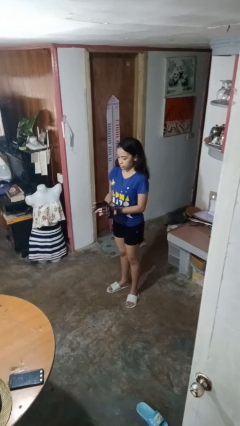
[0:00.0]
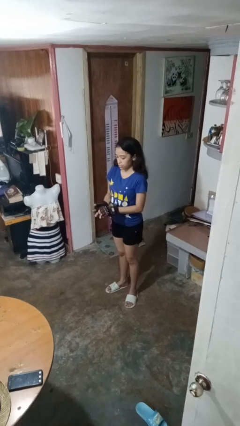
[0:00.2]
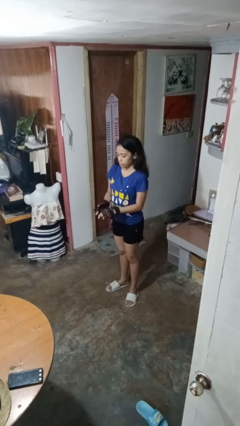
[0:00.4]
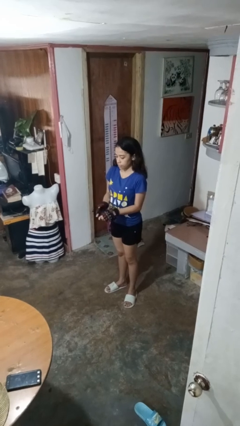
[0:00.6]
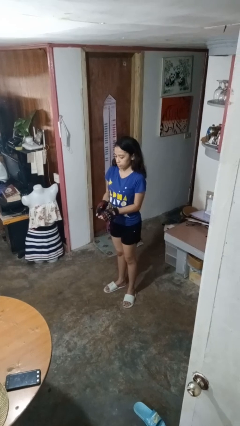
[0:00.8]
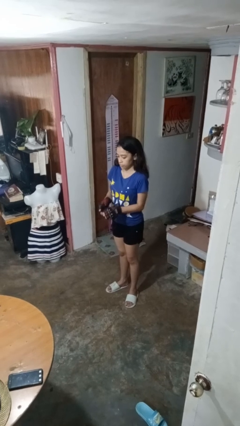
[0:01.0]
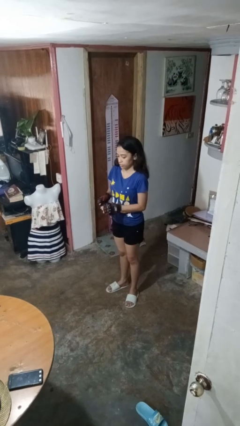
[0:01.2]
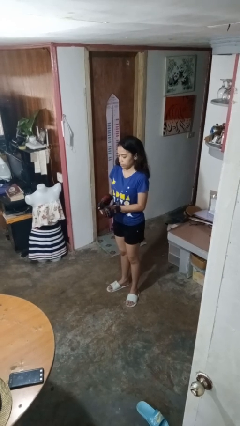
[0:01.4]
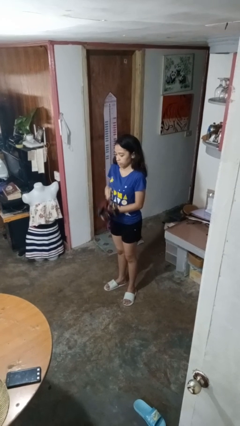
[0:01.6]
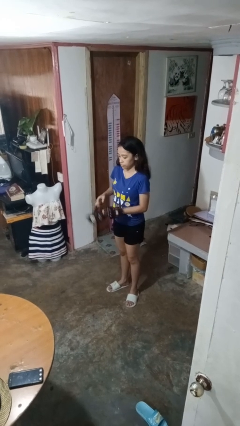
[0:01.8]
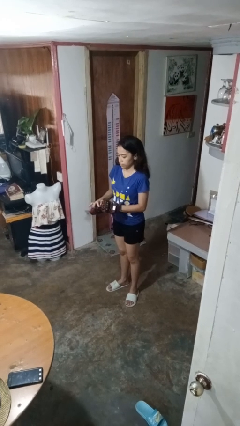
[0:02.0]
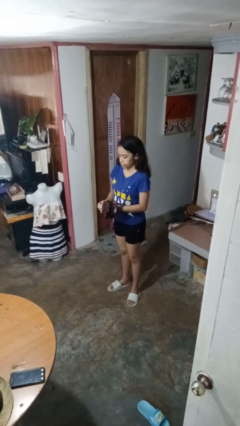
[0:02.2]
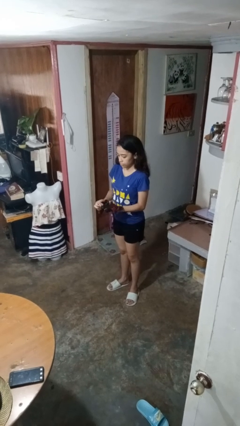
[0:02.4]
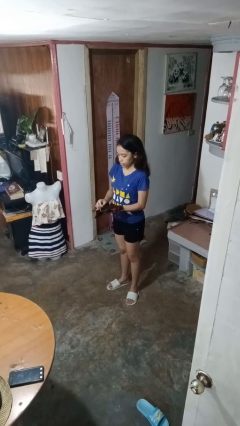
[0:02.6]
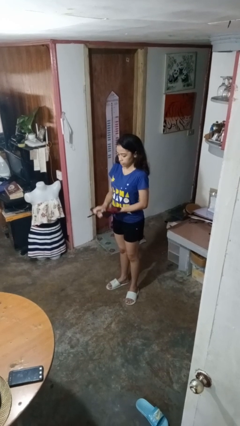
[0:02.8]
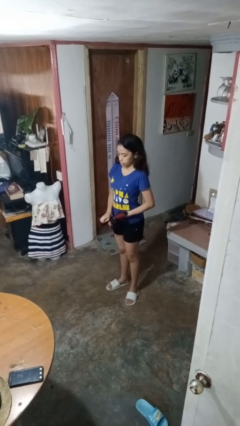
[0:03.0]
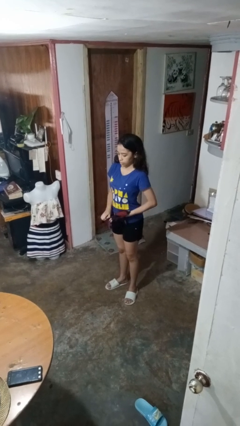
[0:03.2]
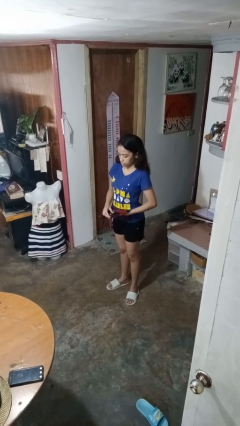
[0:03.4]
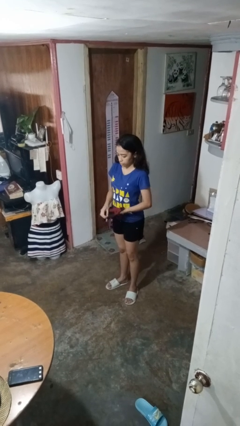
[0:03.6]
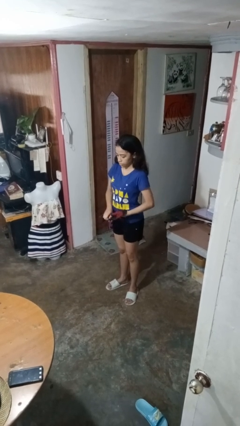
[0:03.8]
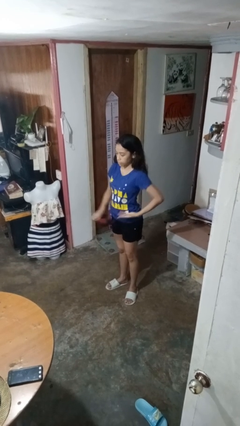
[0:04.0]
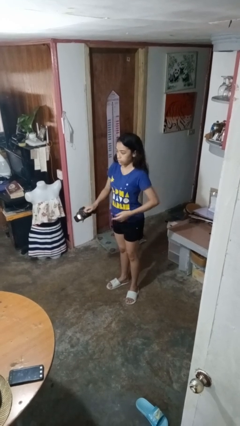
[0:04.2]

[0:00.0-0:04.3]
person takes off gloves

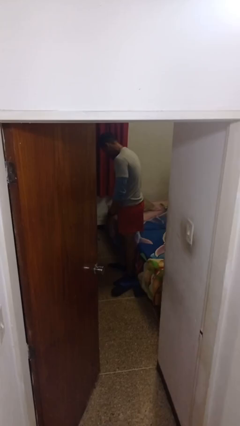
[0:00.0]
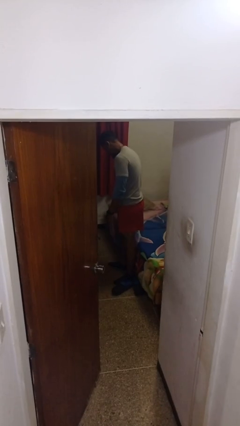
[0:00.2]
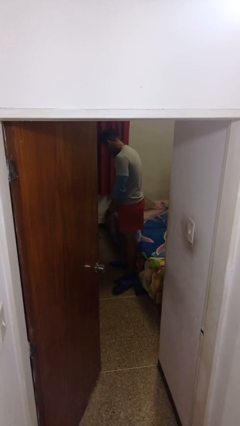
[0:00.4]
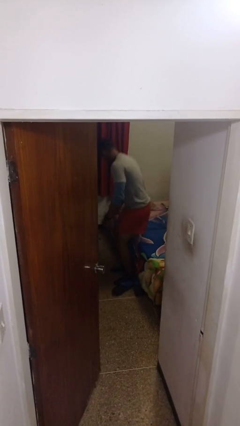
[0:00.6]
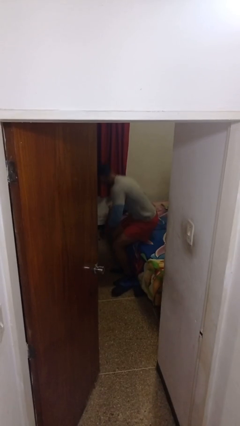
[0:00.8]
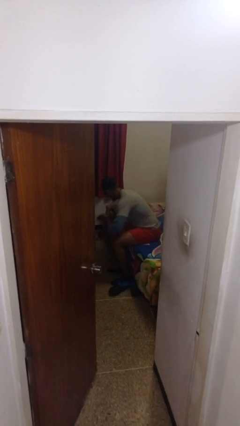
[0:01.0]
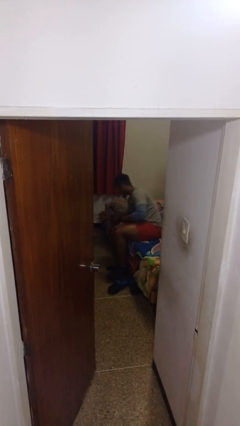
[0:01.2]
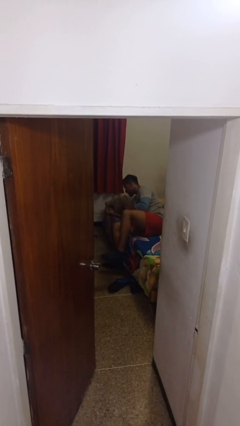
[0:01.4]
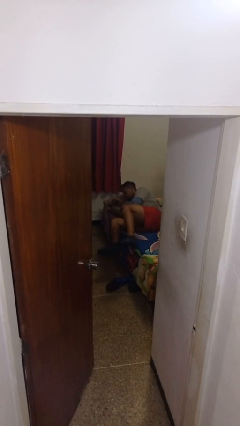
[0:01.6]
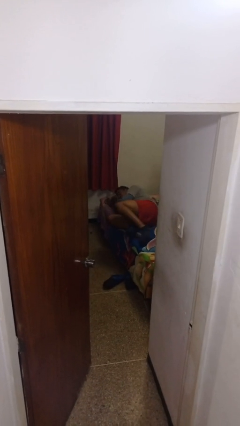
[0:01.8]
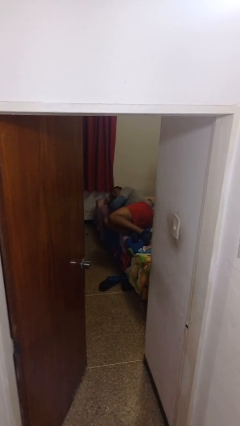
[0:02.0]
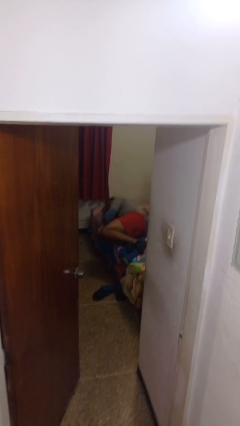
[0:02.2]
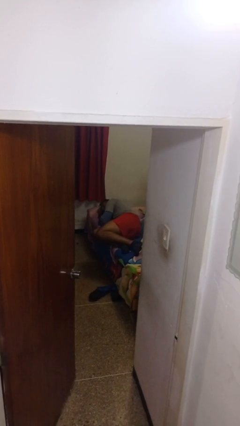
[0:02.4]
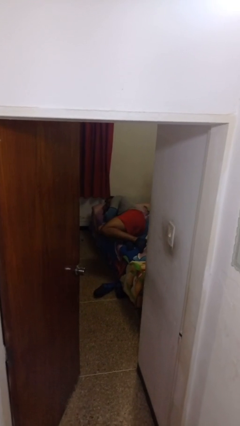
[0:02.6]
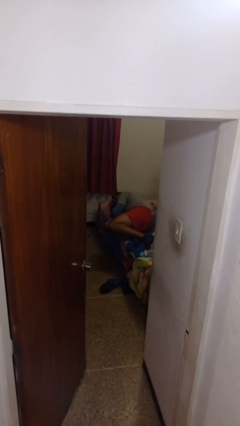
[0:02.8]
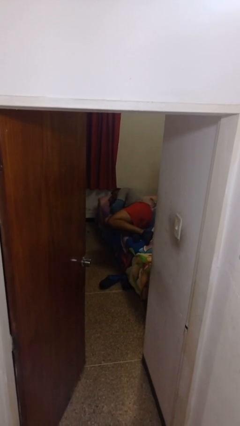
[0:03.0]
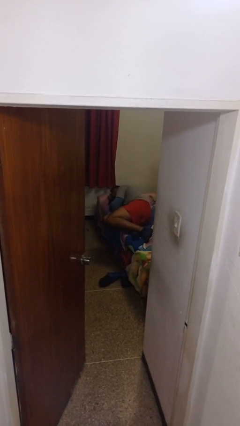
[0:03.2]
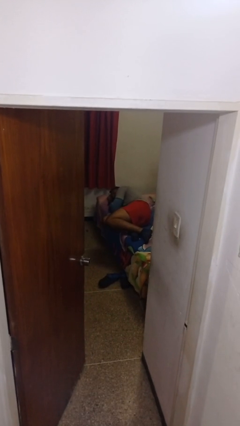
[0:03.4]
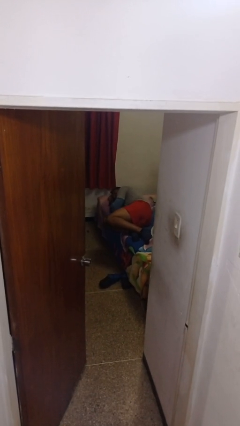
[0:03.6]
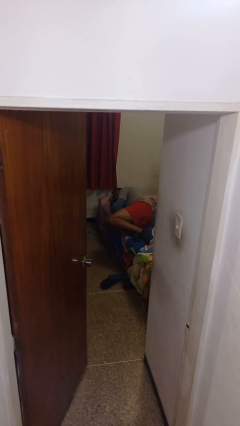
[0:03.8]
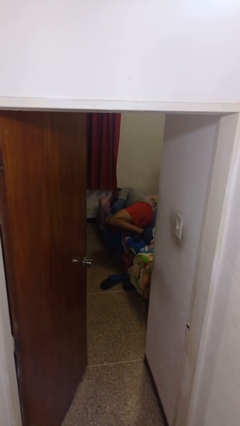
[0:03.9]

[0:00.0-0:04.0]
person lies down on bed

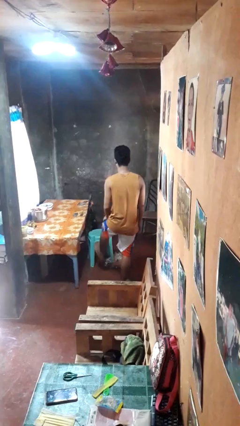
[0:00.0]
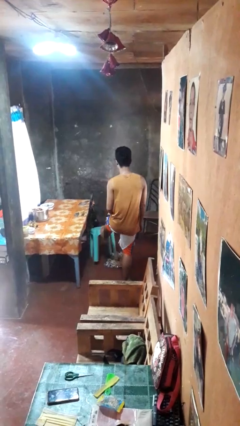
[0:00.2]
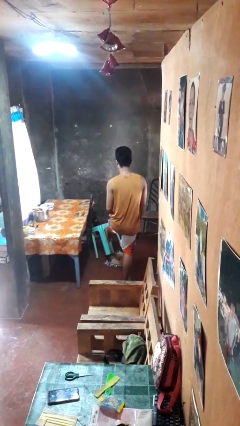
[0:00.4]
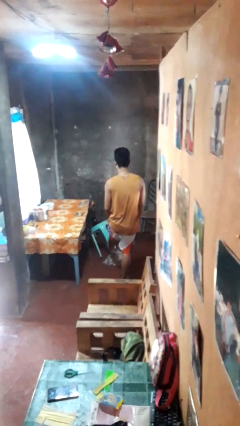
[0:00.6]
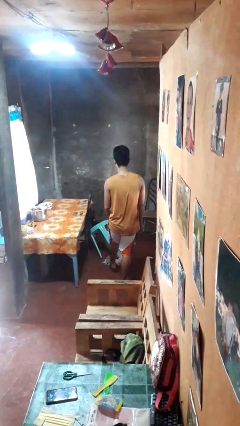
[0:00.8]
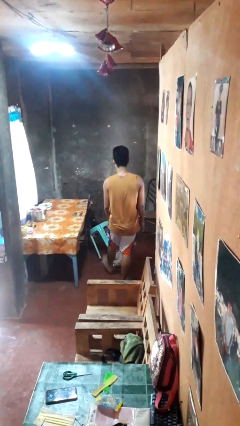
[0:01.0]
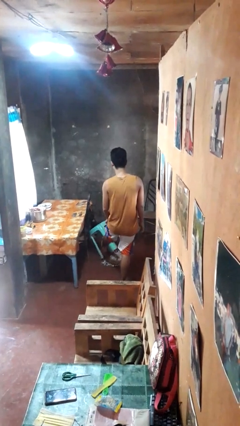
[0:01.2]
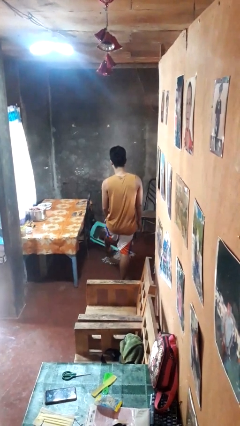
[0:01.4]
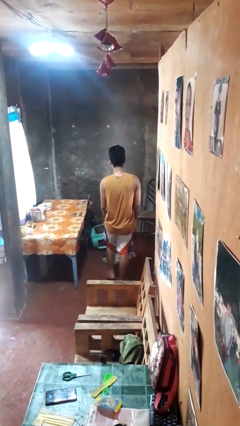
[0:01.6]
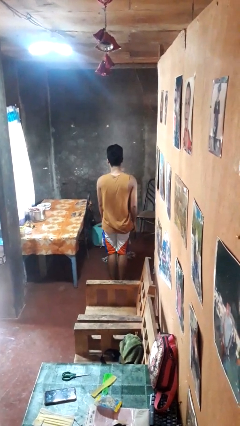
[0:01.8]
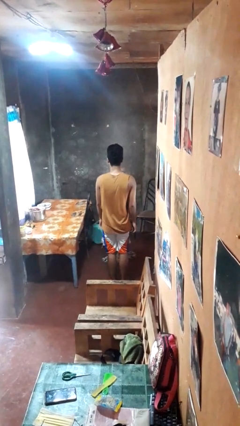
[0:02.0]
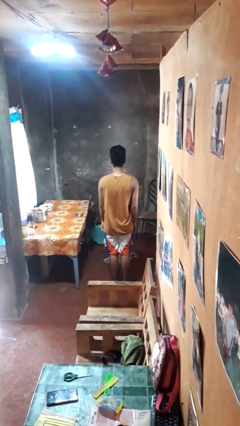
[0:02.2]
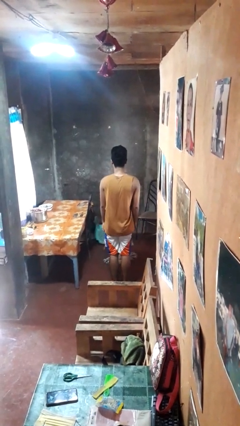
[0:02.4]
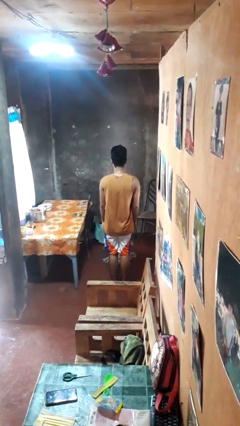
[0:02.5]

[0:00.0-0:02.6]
person knocks over furniture

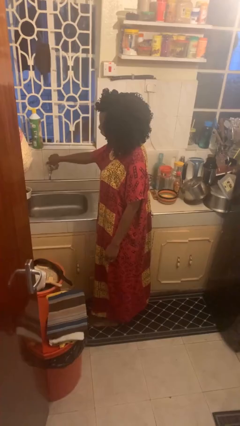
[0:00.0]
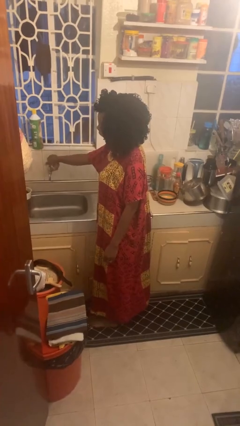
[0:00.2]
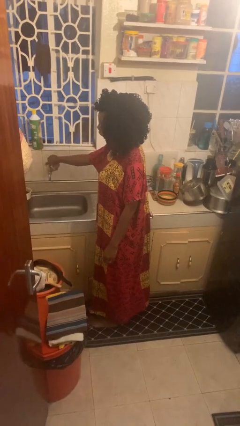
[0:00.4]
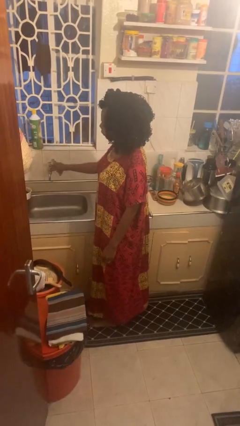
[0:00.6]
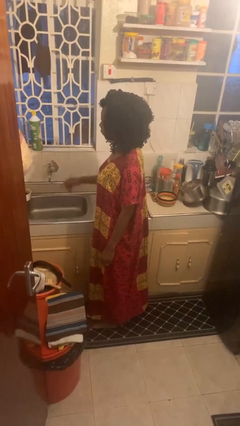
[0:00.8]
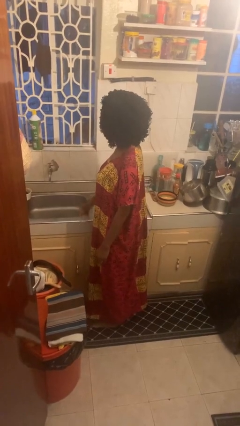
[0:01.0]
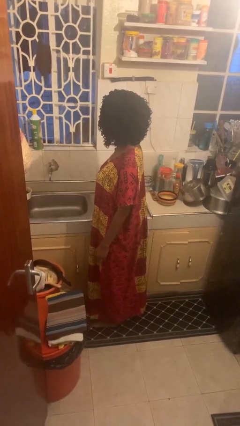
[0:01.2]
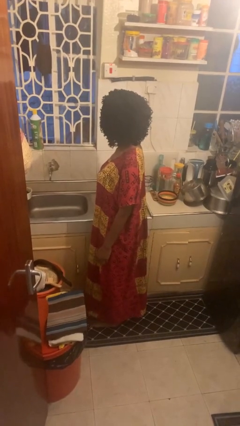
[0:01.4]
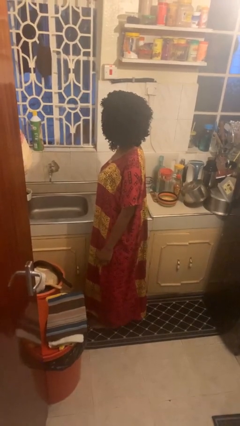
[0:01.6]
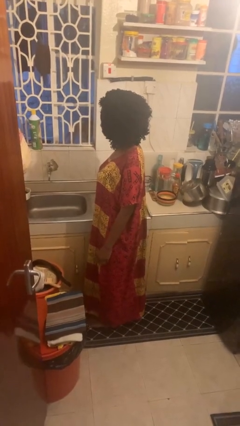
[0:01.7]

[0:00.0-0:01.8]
person turns off faucet

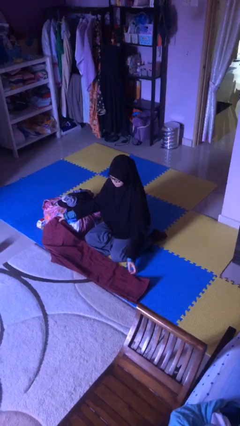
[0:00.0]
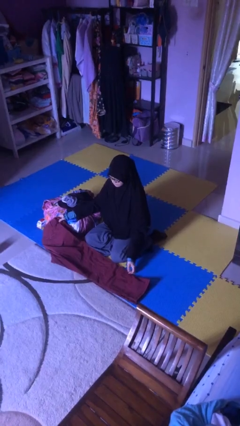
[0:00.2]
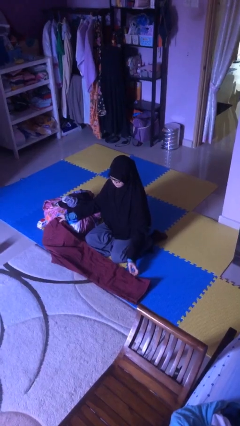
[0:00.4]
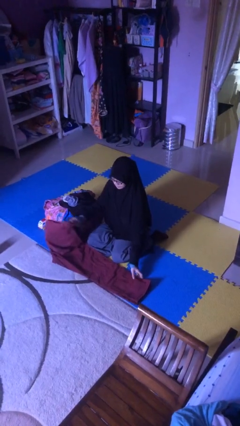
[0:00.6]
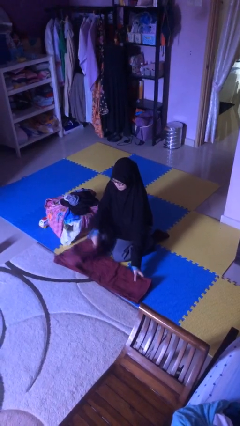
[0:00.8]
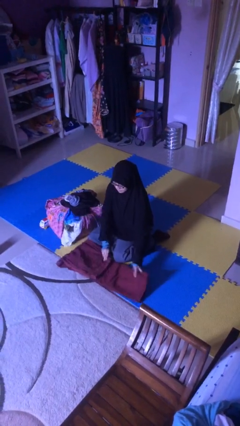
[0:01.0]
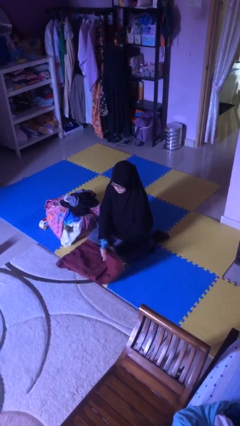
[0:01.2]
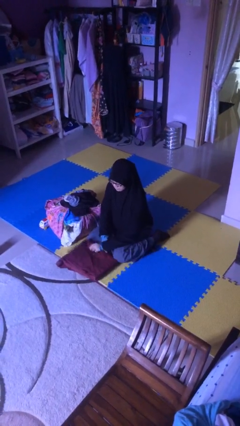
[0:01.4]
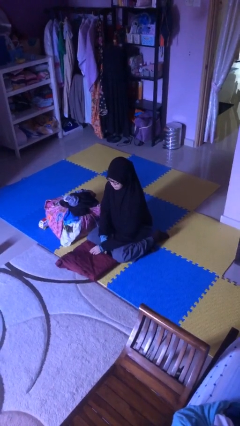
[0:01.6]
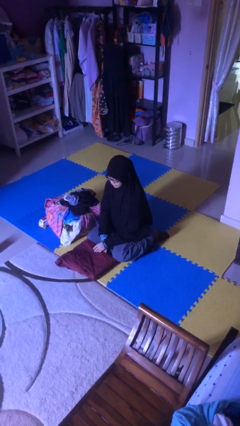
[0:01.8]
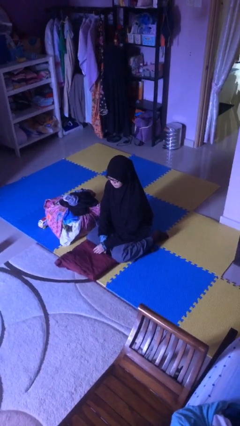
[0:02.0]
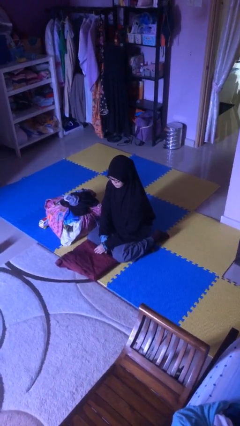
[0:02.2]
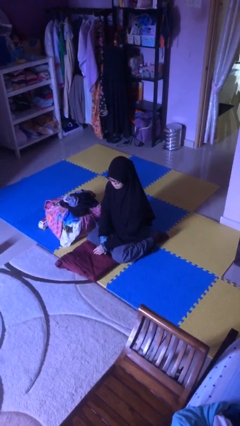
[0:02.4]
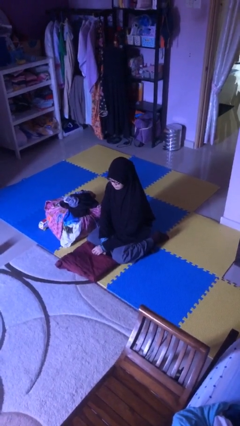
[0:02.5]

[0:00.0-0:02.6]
person folds pants

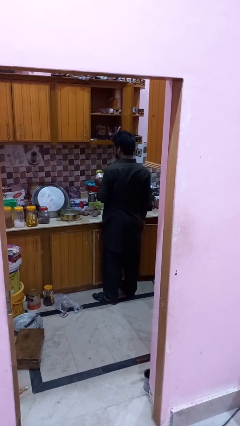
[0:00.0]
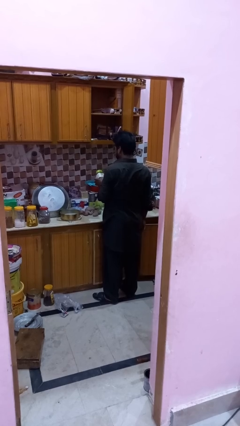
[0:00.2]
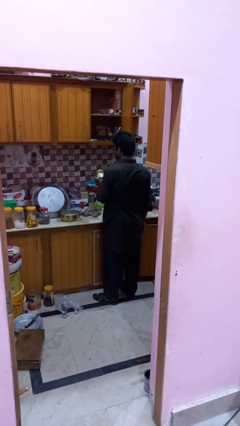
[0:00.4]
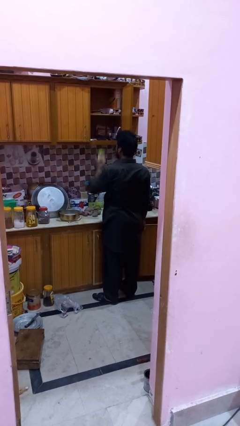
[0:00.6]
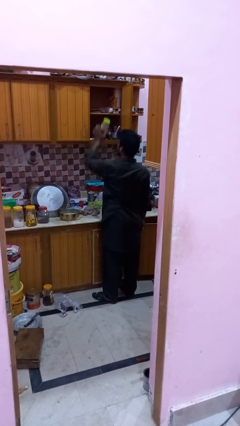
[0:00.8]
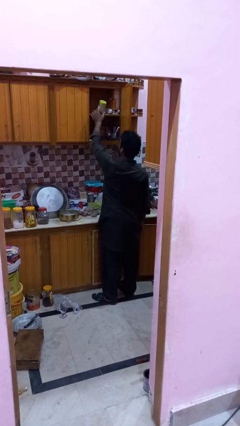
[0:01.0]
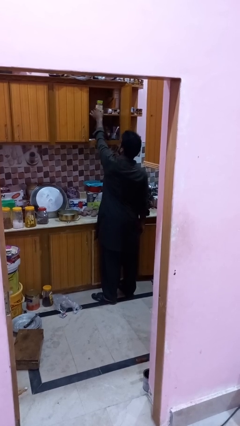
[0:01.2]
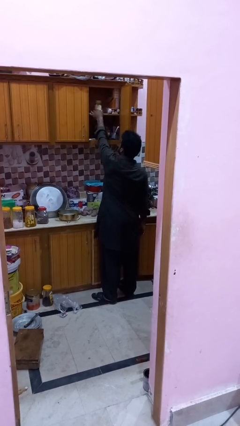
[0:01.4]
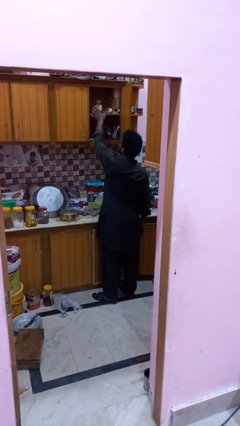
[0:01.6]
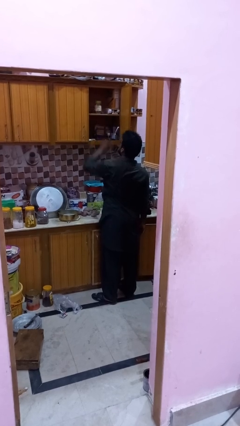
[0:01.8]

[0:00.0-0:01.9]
person puts object in cabinet

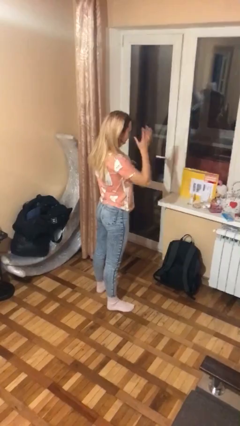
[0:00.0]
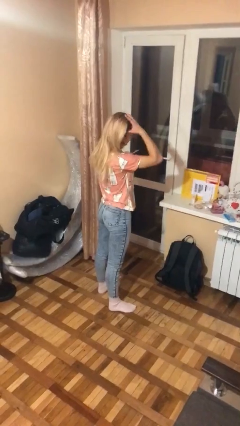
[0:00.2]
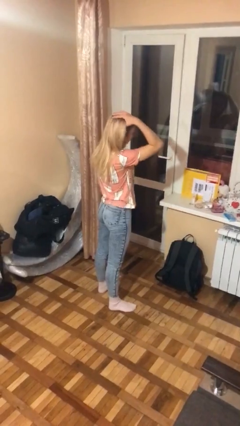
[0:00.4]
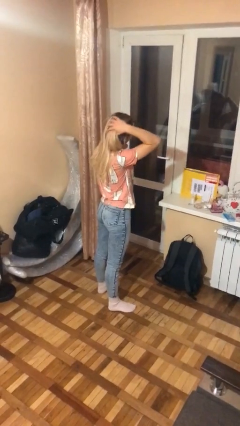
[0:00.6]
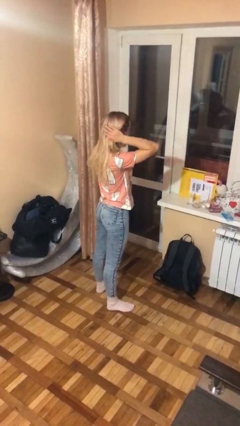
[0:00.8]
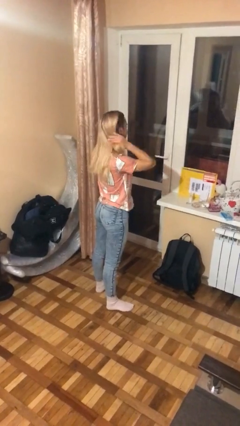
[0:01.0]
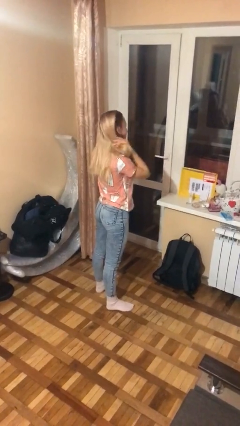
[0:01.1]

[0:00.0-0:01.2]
person strokes hair
